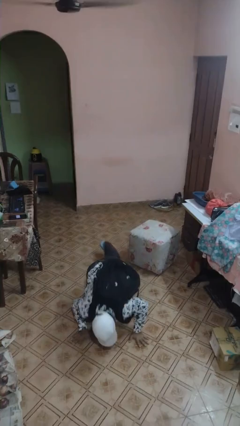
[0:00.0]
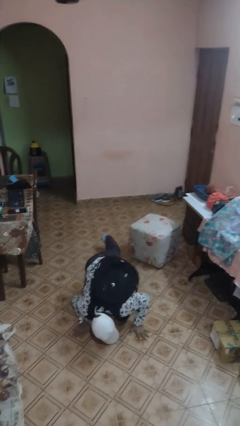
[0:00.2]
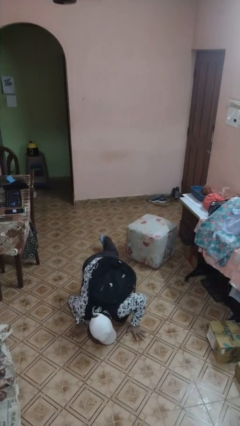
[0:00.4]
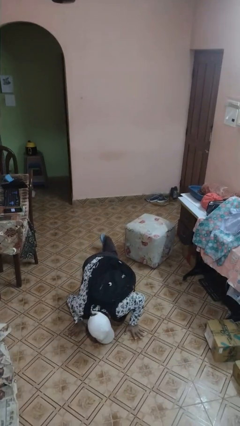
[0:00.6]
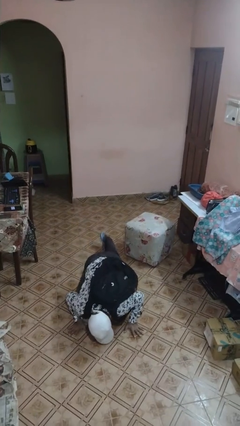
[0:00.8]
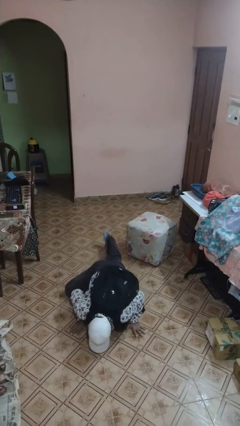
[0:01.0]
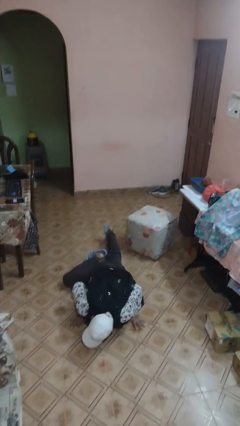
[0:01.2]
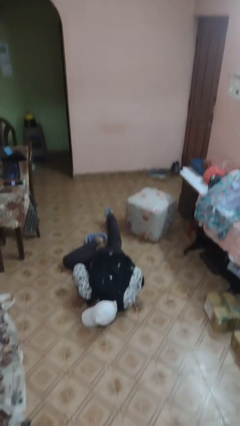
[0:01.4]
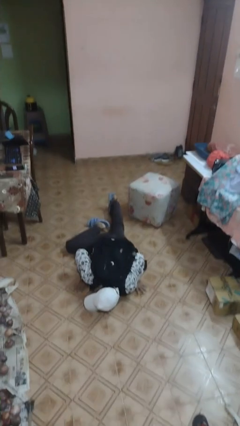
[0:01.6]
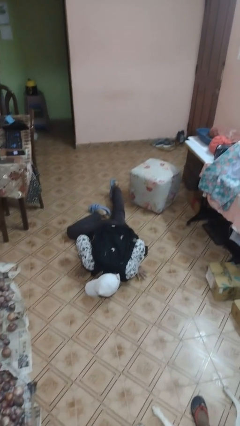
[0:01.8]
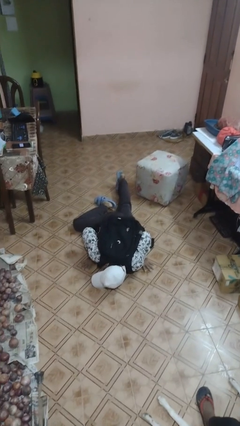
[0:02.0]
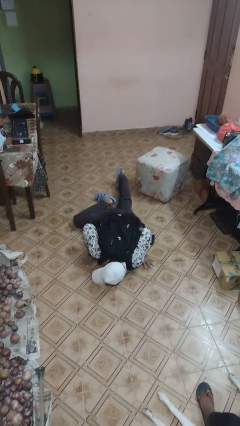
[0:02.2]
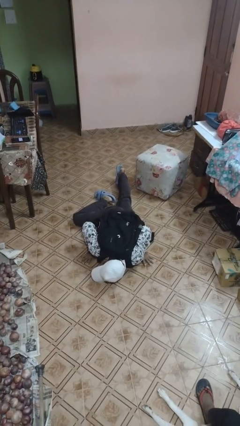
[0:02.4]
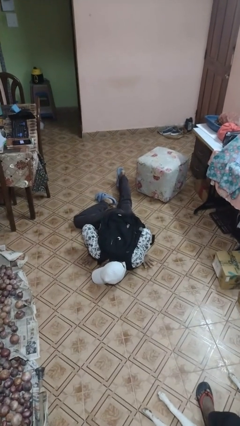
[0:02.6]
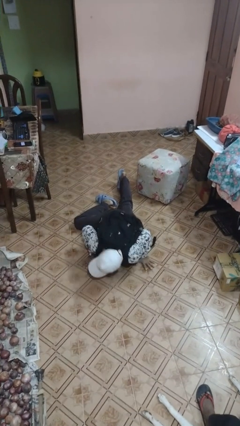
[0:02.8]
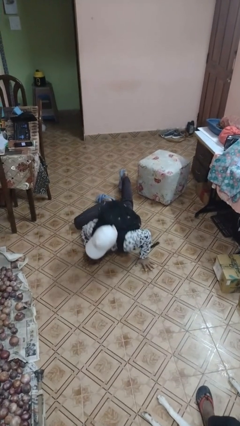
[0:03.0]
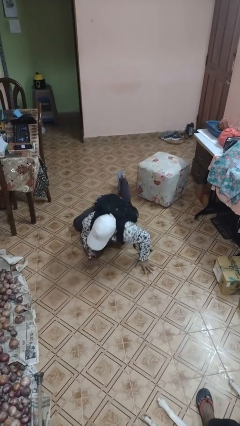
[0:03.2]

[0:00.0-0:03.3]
person lies down on floor

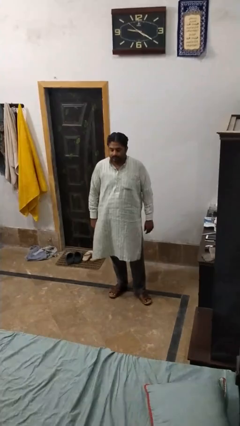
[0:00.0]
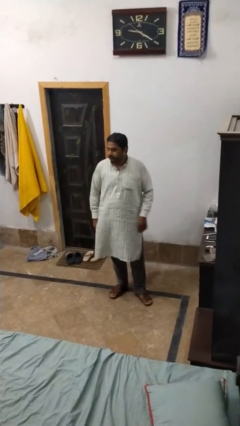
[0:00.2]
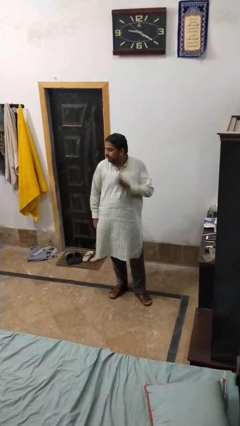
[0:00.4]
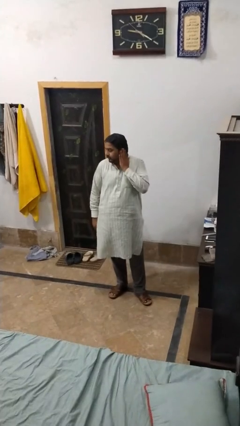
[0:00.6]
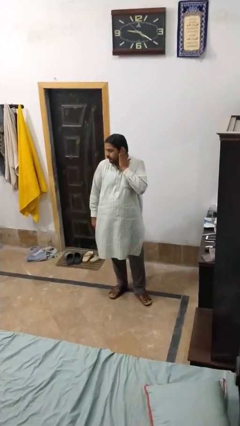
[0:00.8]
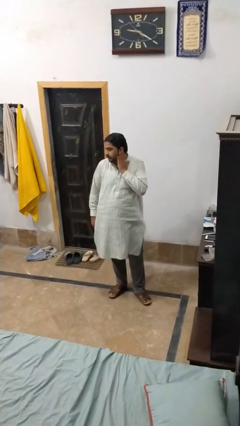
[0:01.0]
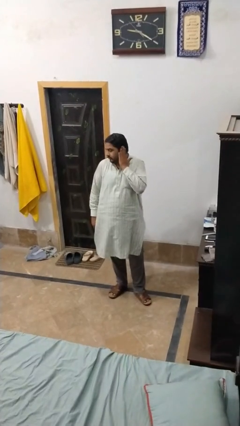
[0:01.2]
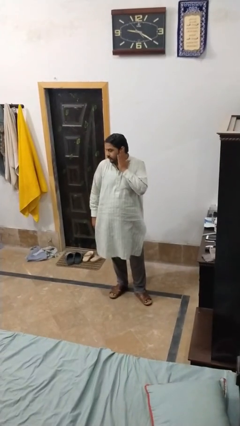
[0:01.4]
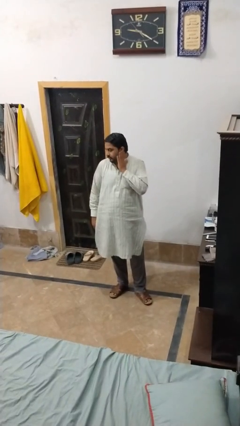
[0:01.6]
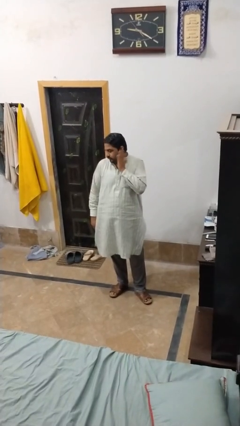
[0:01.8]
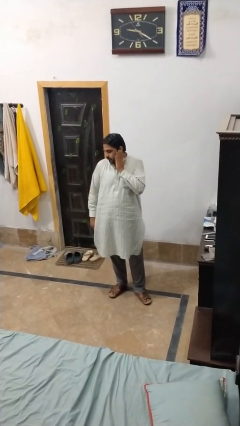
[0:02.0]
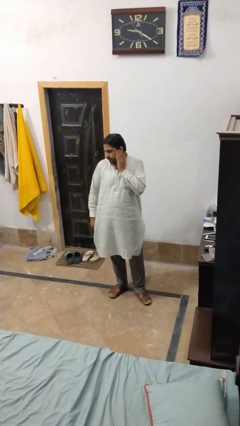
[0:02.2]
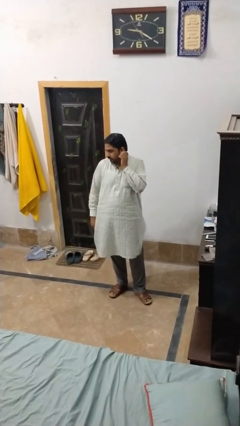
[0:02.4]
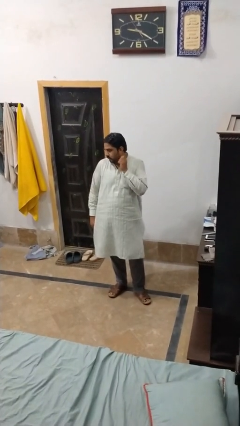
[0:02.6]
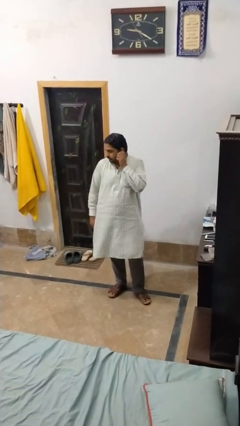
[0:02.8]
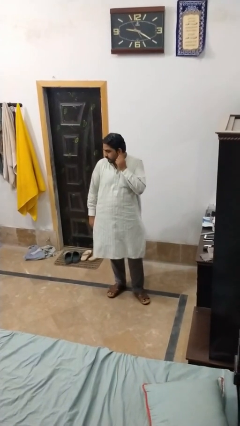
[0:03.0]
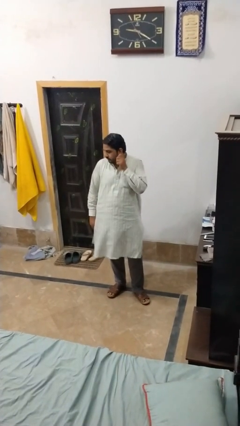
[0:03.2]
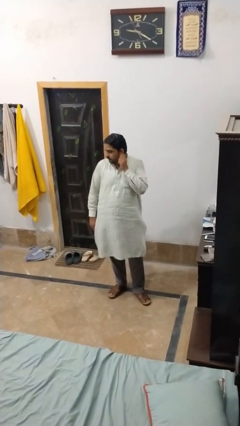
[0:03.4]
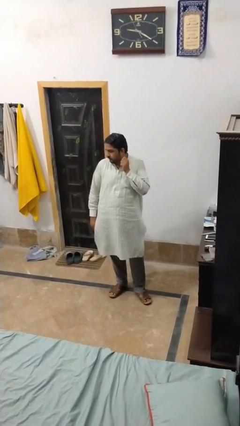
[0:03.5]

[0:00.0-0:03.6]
person touches earlobe

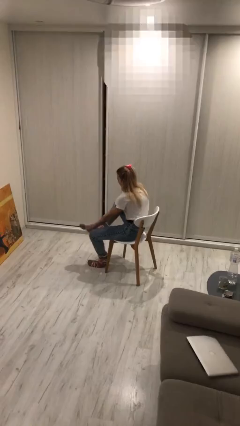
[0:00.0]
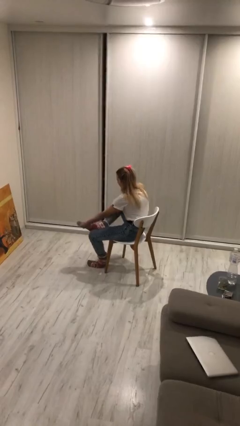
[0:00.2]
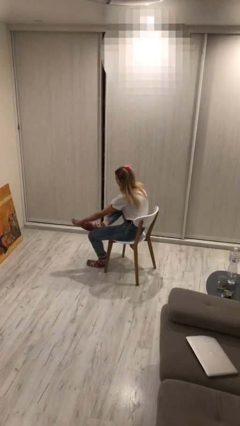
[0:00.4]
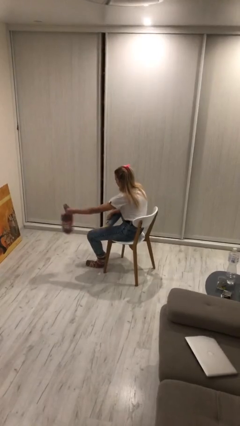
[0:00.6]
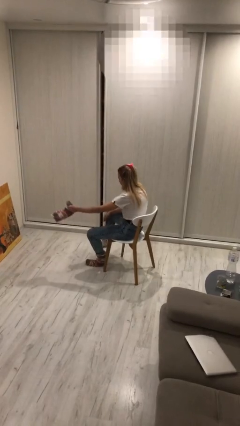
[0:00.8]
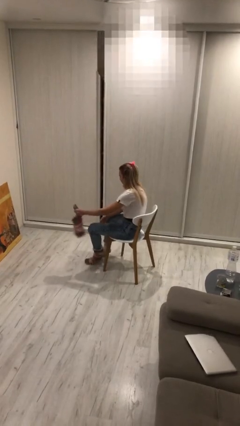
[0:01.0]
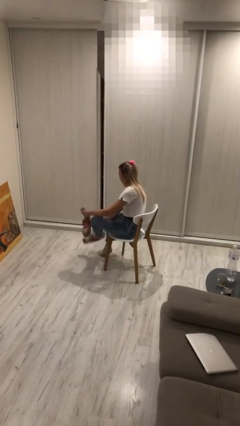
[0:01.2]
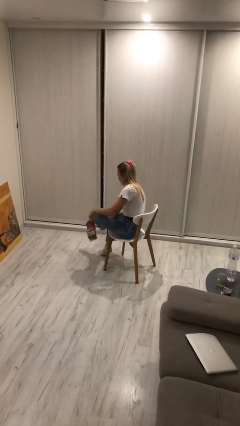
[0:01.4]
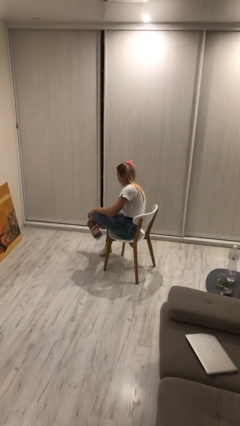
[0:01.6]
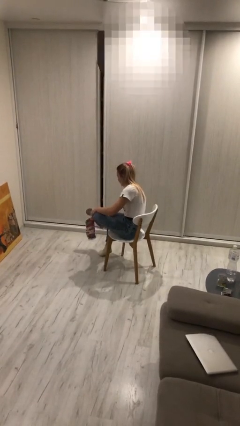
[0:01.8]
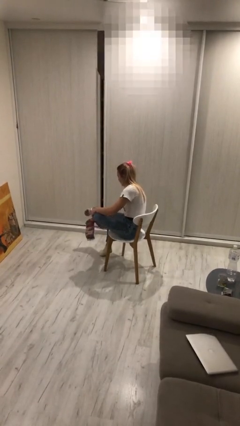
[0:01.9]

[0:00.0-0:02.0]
person takes off socks

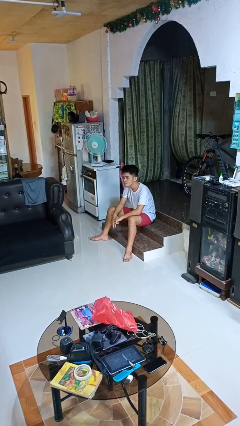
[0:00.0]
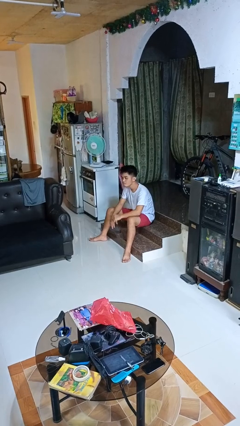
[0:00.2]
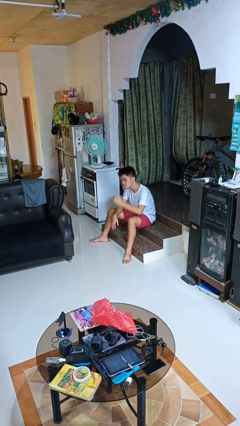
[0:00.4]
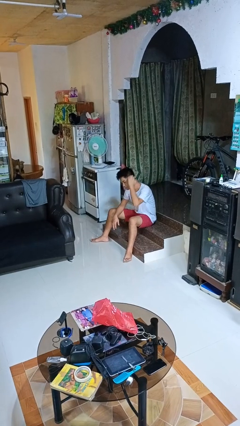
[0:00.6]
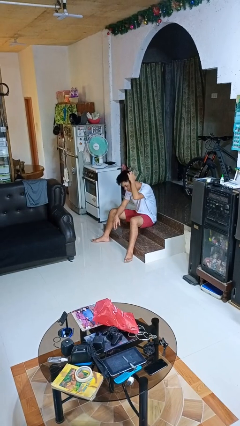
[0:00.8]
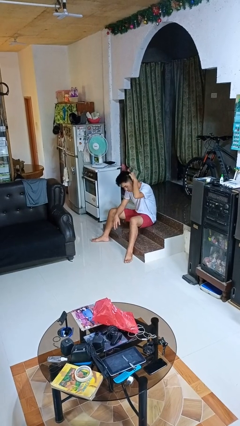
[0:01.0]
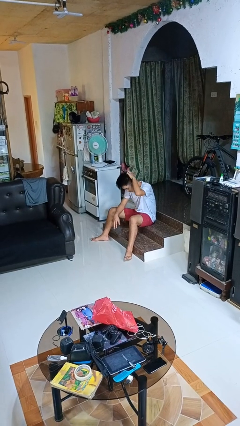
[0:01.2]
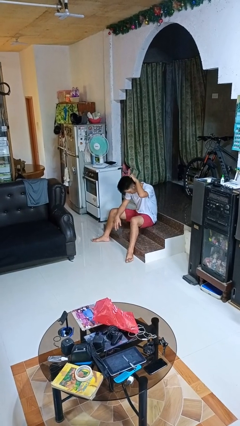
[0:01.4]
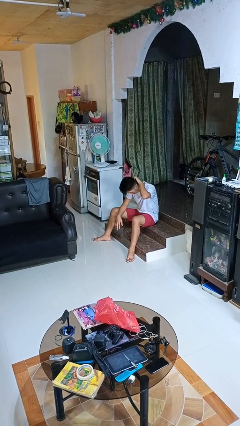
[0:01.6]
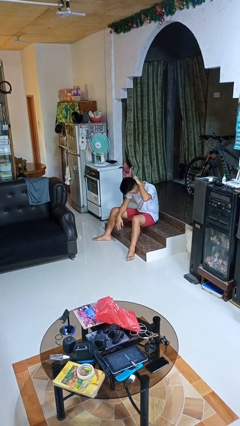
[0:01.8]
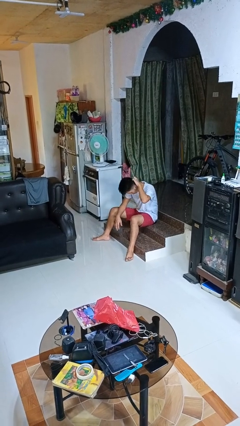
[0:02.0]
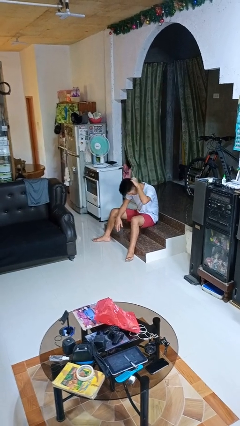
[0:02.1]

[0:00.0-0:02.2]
person scratches face

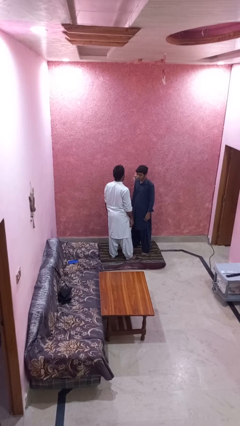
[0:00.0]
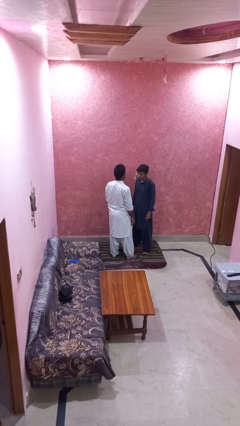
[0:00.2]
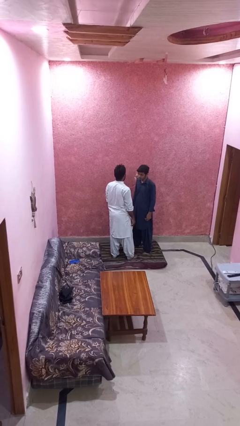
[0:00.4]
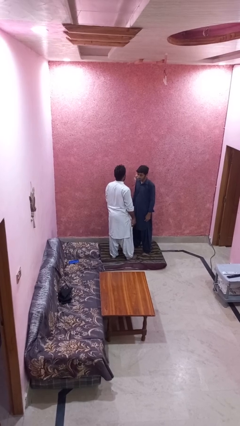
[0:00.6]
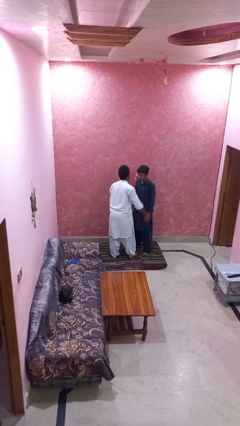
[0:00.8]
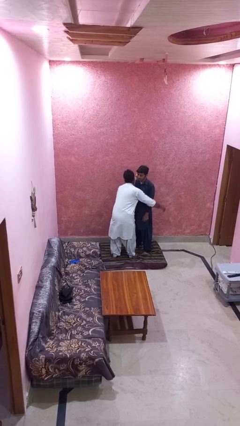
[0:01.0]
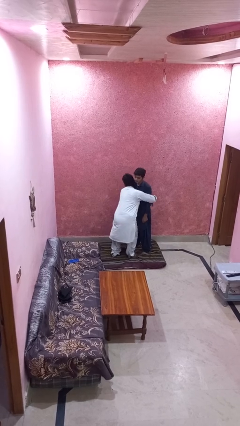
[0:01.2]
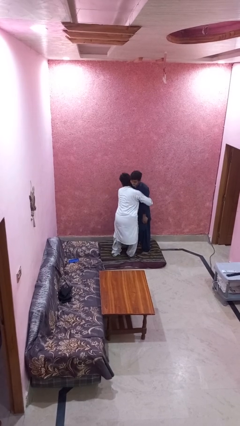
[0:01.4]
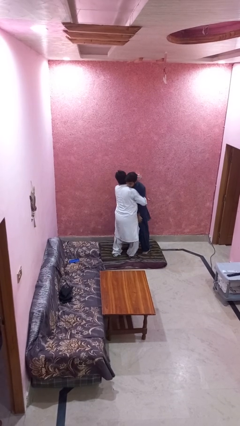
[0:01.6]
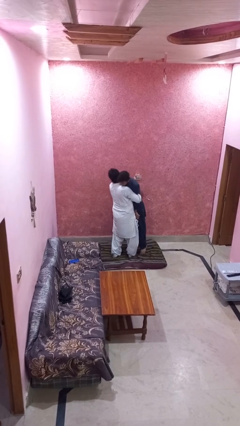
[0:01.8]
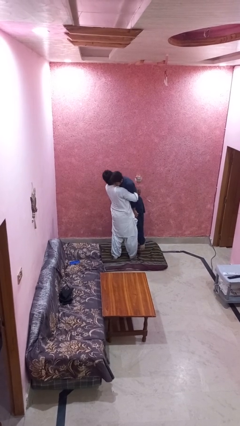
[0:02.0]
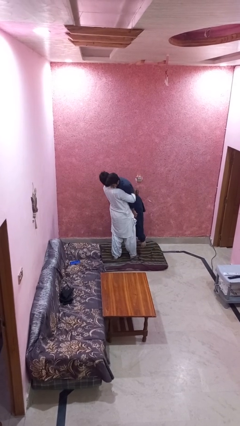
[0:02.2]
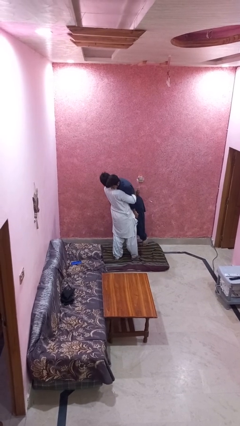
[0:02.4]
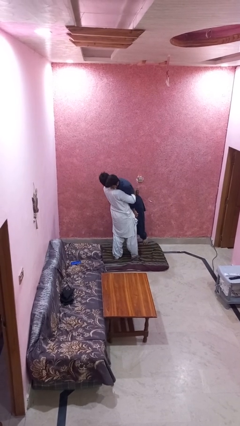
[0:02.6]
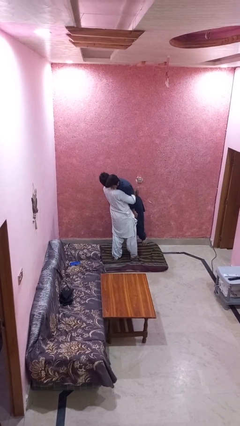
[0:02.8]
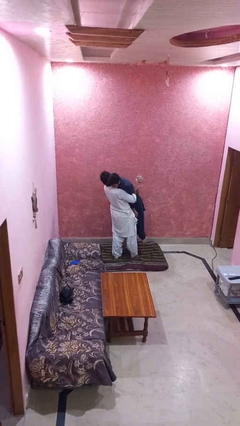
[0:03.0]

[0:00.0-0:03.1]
person picks up person

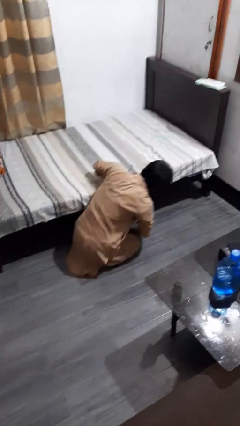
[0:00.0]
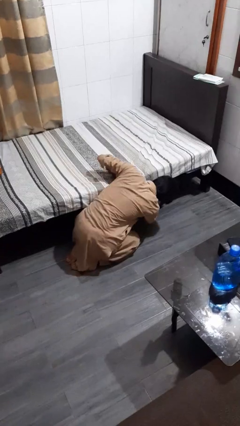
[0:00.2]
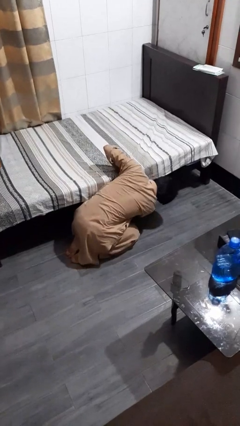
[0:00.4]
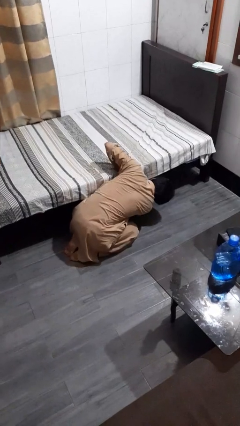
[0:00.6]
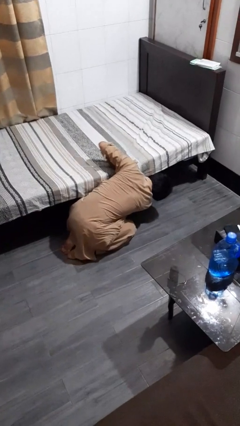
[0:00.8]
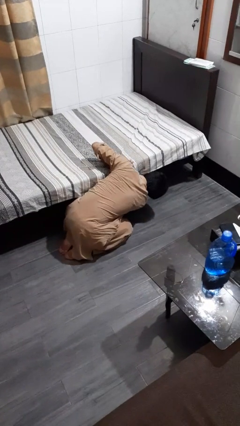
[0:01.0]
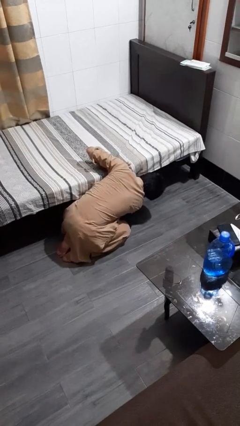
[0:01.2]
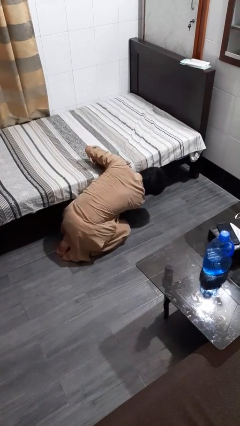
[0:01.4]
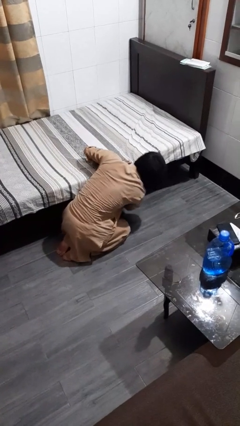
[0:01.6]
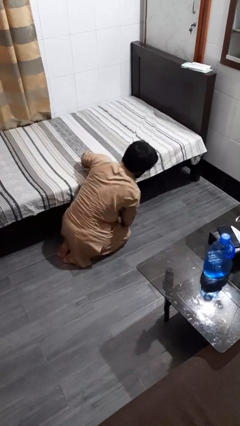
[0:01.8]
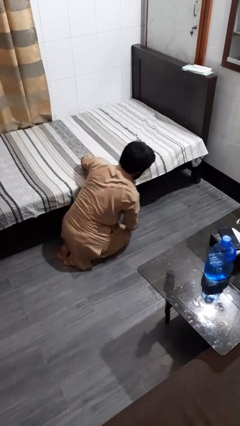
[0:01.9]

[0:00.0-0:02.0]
person searches under bed

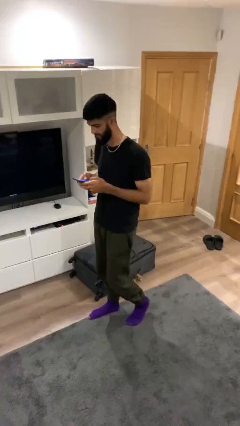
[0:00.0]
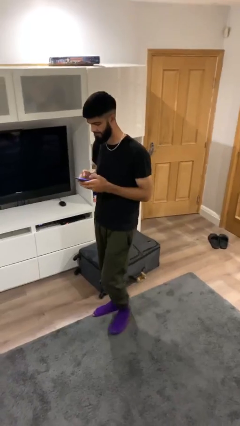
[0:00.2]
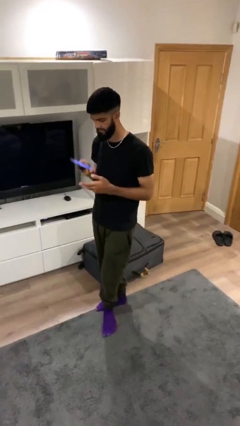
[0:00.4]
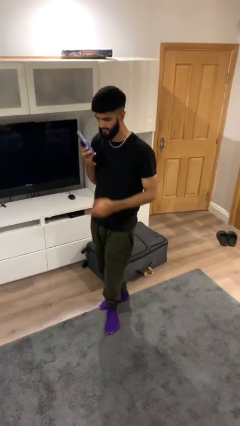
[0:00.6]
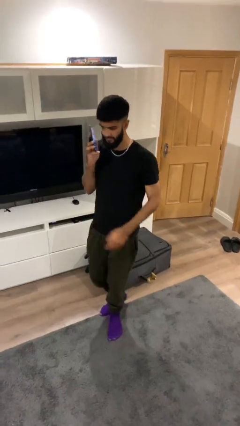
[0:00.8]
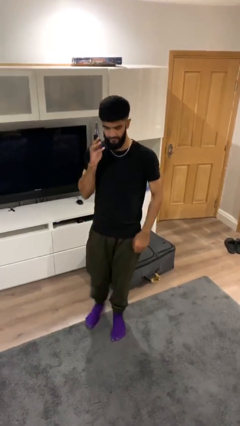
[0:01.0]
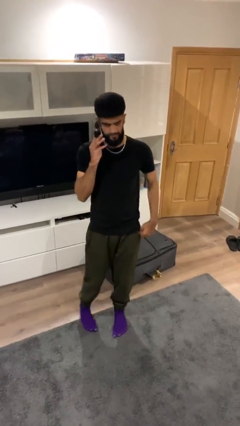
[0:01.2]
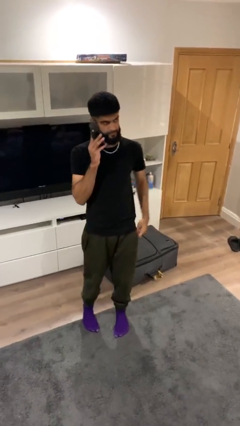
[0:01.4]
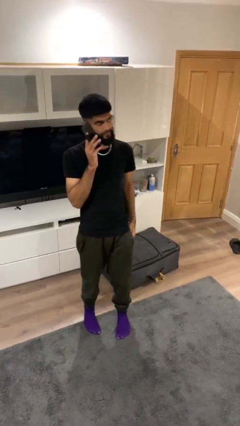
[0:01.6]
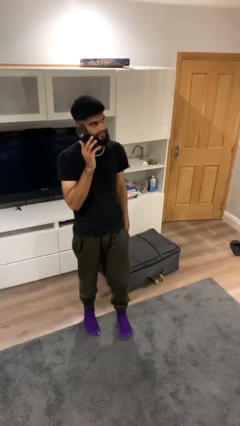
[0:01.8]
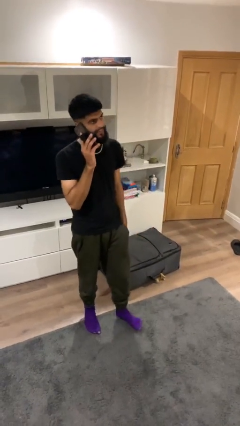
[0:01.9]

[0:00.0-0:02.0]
person talks on phone
